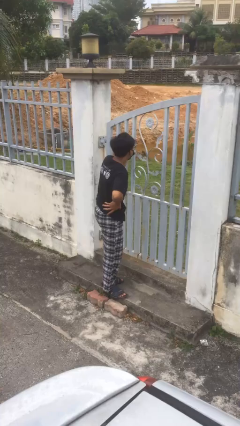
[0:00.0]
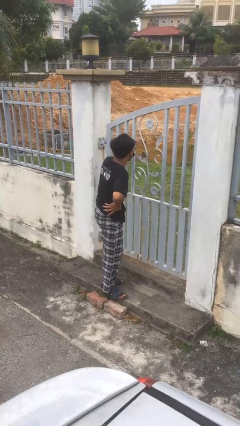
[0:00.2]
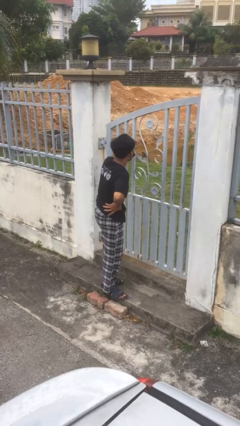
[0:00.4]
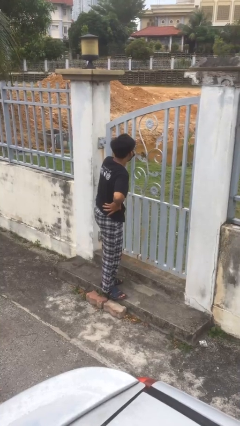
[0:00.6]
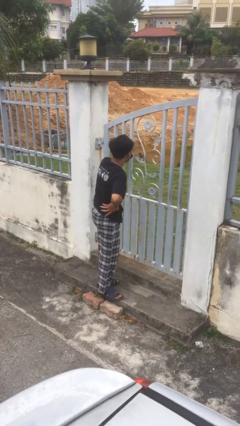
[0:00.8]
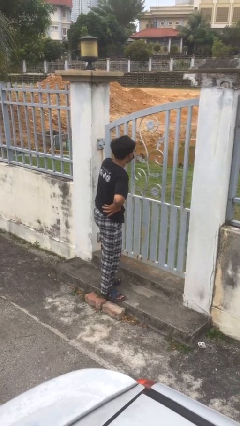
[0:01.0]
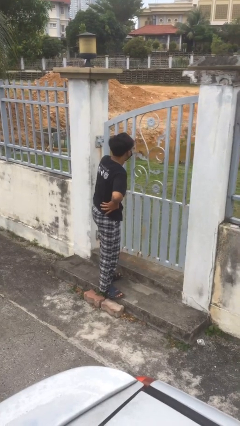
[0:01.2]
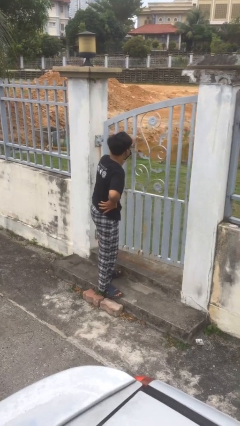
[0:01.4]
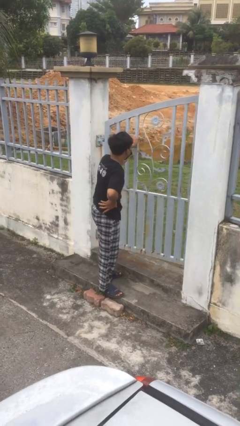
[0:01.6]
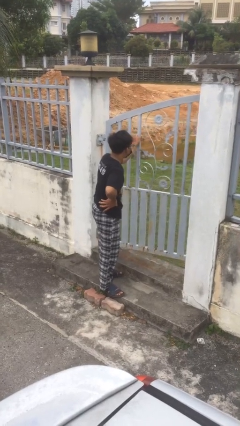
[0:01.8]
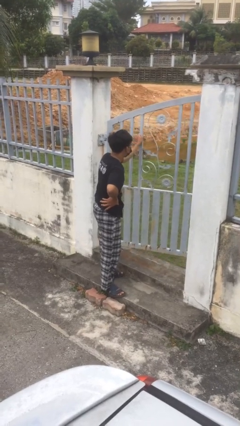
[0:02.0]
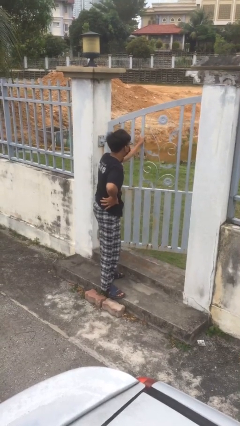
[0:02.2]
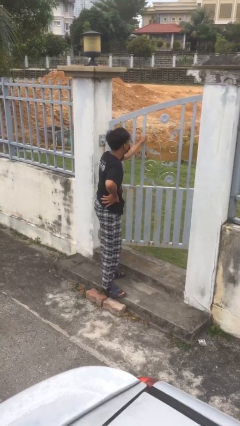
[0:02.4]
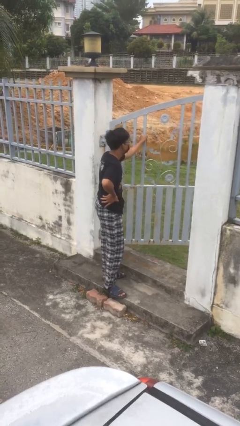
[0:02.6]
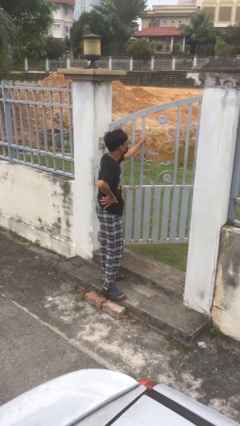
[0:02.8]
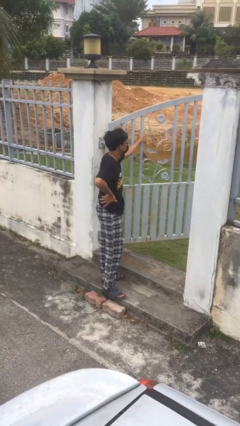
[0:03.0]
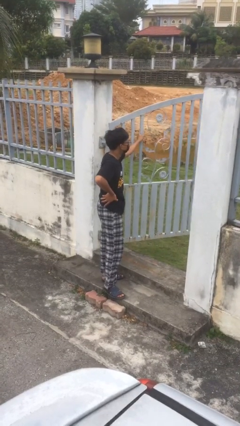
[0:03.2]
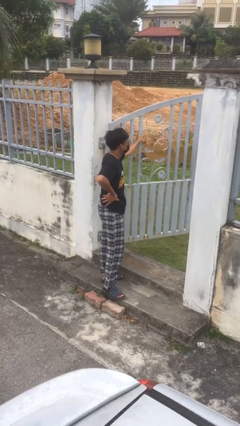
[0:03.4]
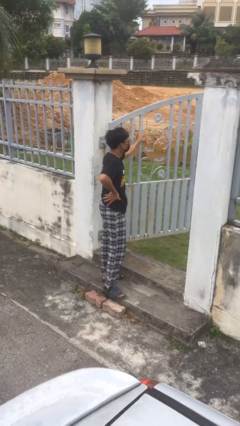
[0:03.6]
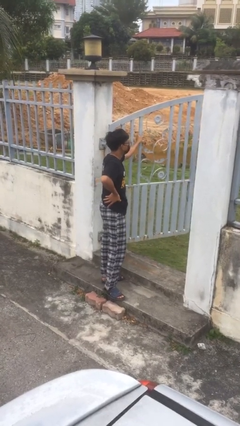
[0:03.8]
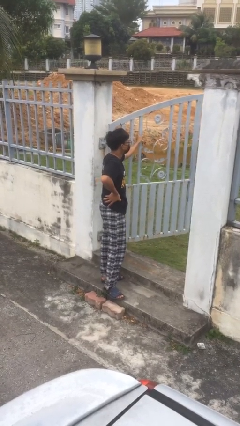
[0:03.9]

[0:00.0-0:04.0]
person opens facility door

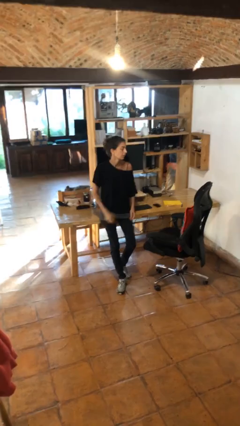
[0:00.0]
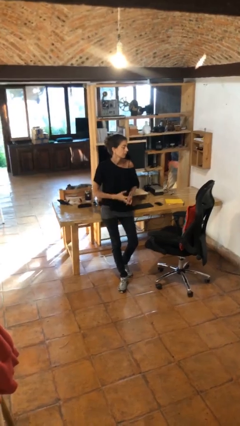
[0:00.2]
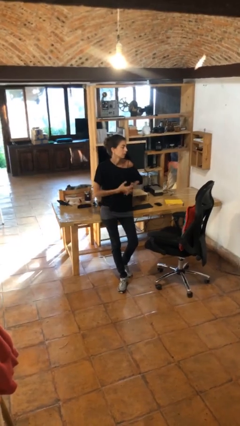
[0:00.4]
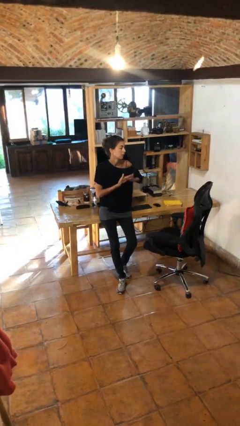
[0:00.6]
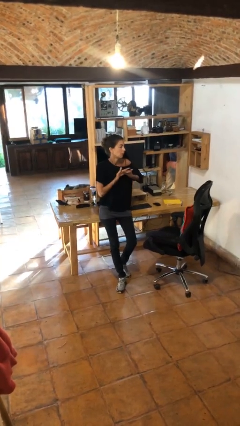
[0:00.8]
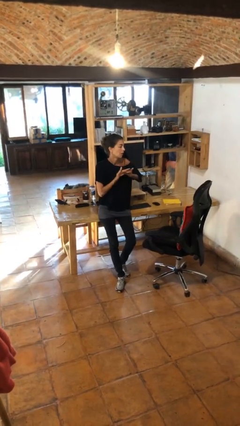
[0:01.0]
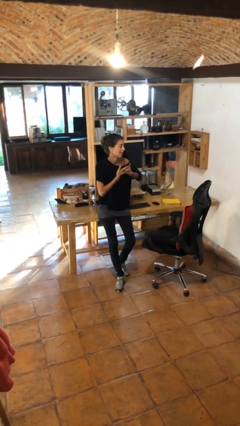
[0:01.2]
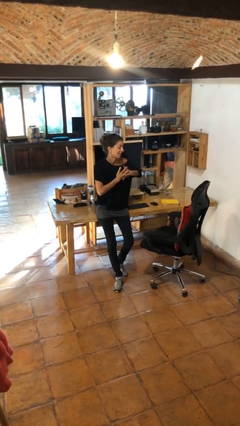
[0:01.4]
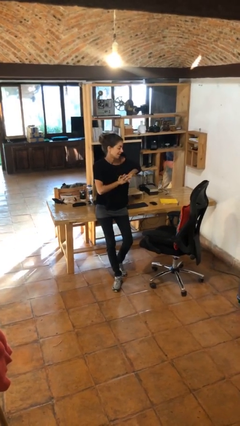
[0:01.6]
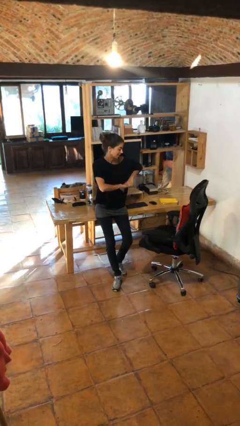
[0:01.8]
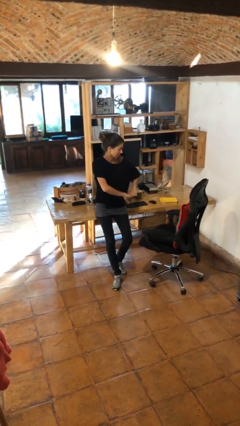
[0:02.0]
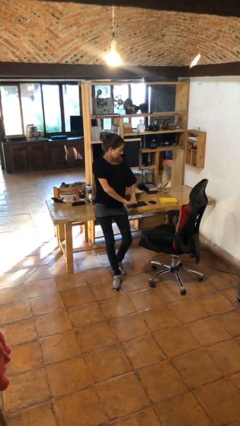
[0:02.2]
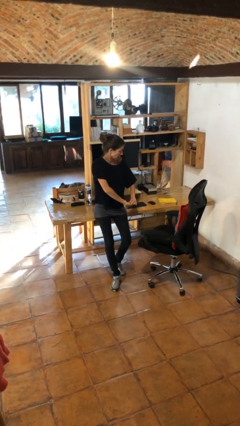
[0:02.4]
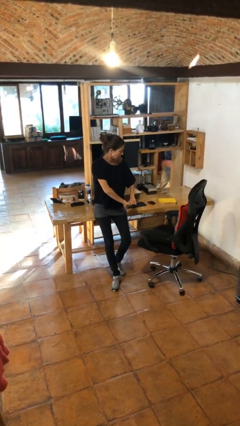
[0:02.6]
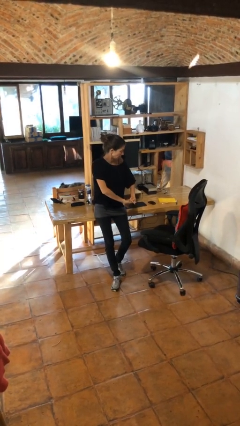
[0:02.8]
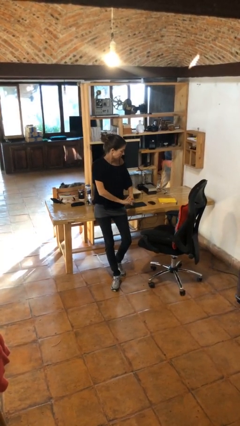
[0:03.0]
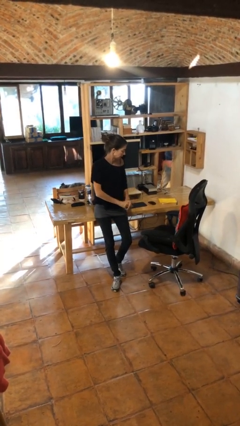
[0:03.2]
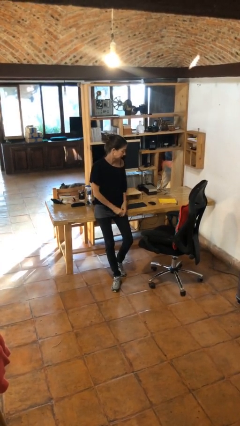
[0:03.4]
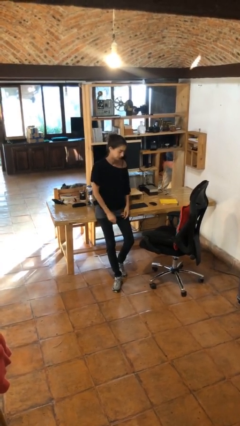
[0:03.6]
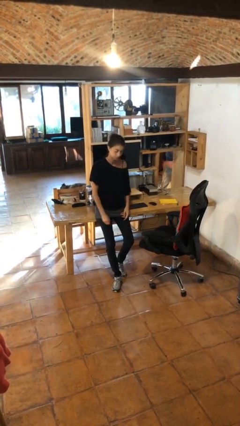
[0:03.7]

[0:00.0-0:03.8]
person cracks knuckles

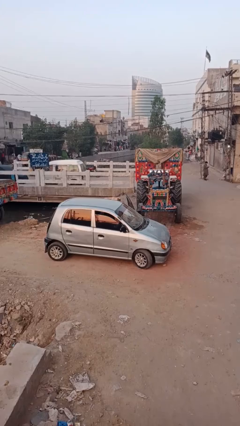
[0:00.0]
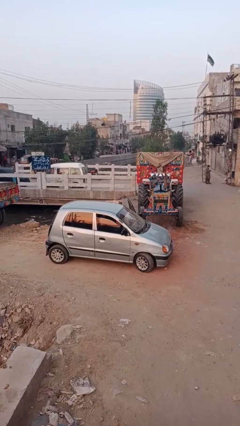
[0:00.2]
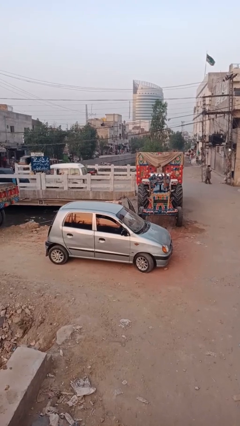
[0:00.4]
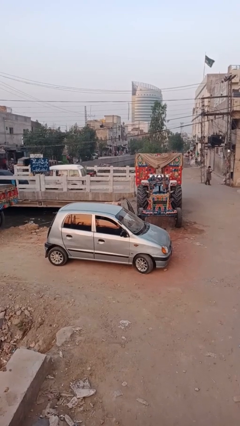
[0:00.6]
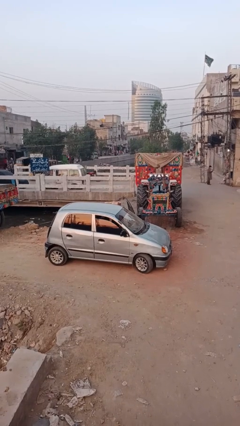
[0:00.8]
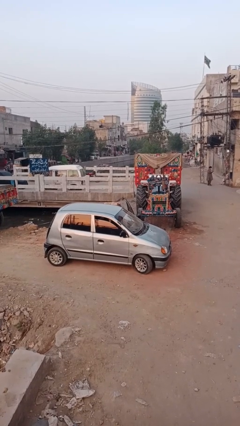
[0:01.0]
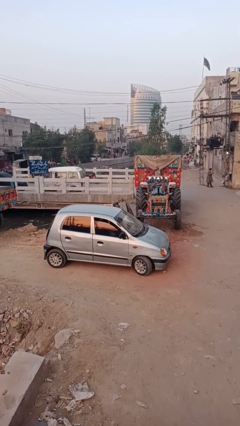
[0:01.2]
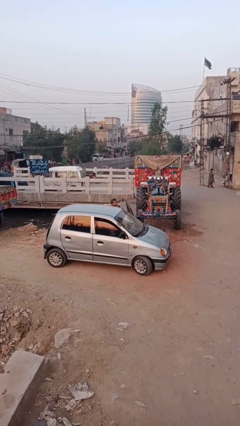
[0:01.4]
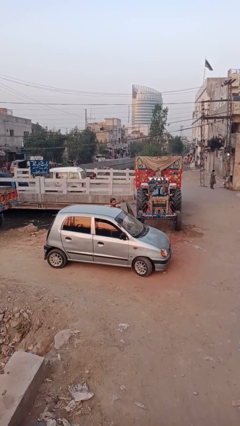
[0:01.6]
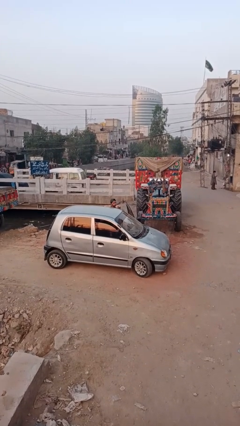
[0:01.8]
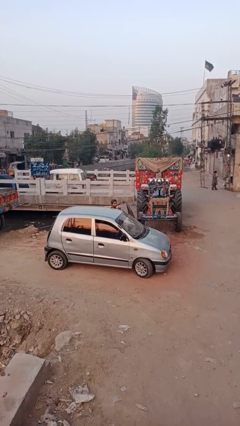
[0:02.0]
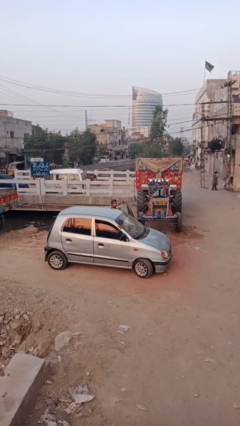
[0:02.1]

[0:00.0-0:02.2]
person exits car

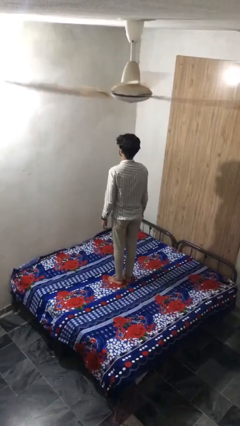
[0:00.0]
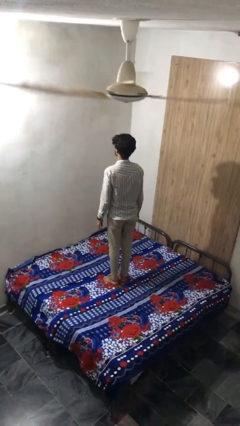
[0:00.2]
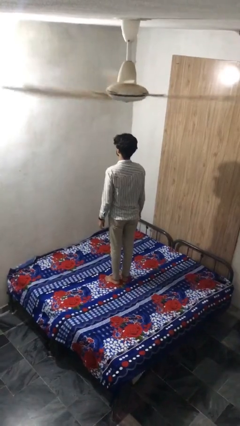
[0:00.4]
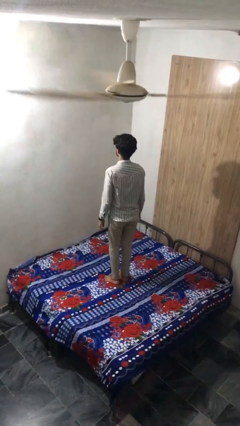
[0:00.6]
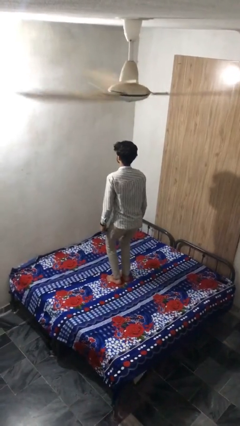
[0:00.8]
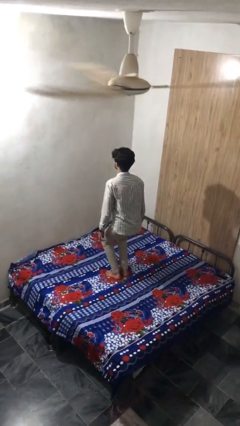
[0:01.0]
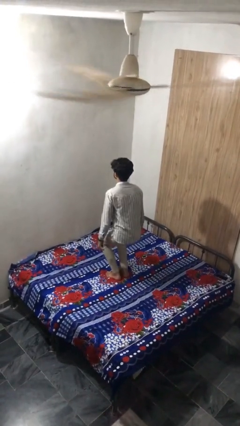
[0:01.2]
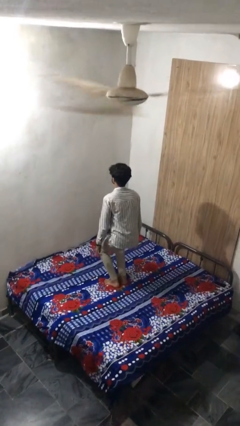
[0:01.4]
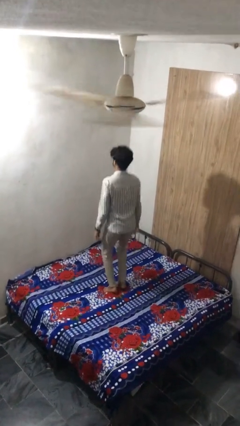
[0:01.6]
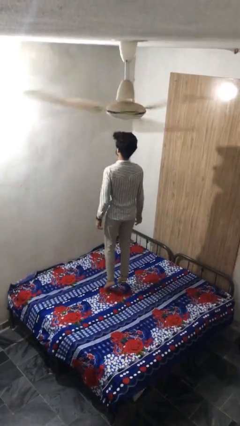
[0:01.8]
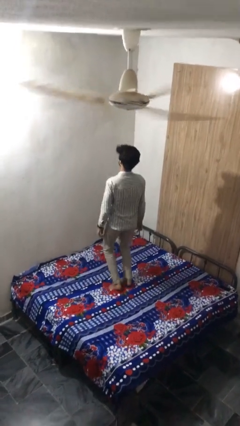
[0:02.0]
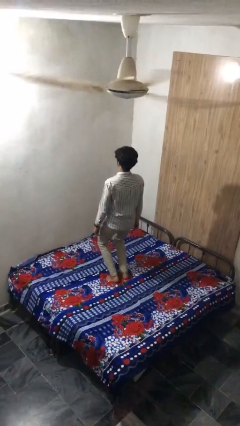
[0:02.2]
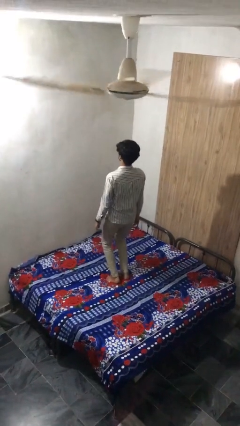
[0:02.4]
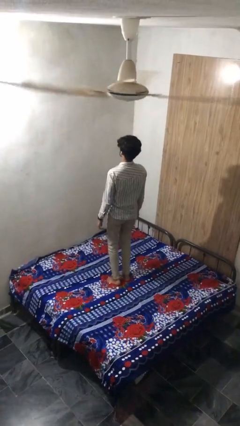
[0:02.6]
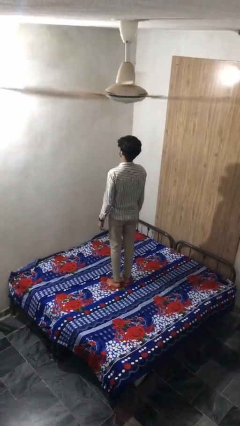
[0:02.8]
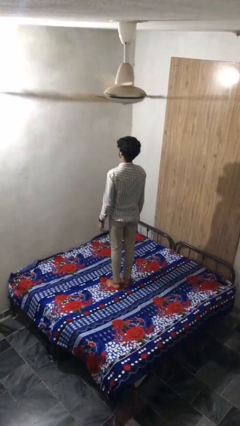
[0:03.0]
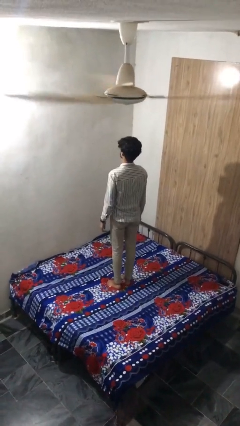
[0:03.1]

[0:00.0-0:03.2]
person jumps on bed

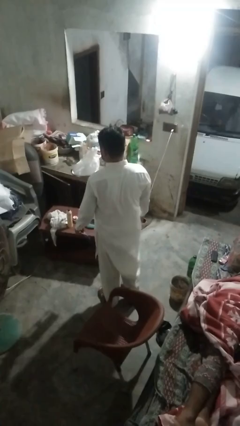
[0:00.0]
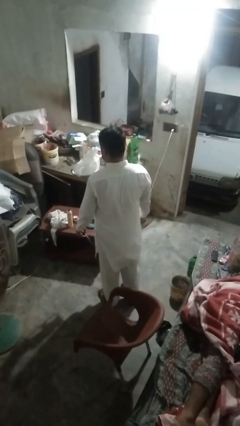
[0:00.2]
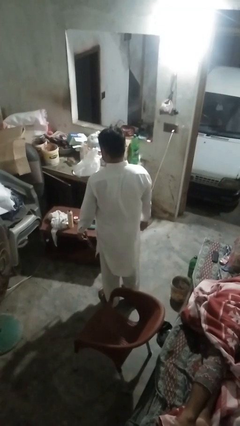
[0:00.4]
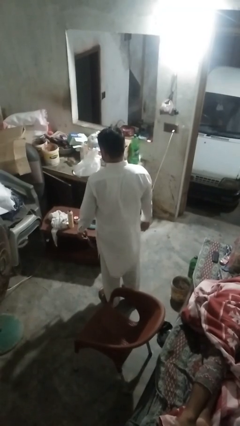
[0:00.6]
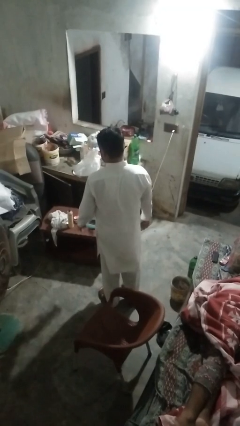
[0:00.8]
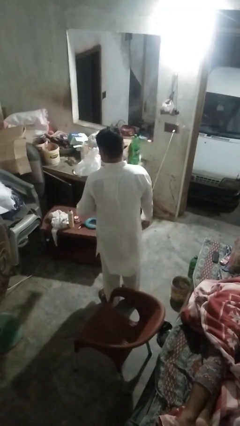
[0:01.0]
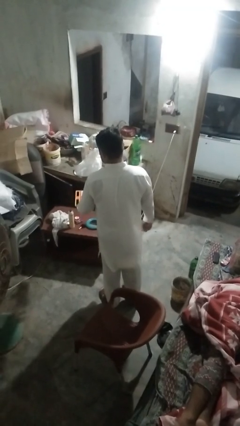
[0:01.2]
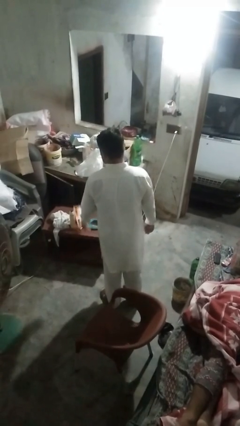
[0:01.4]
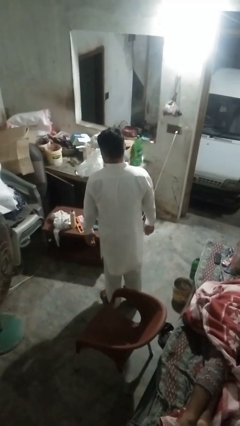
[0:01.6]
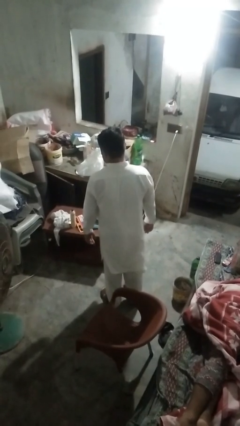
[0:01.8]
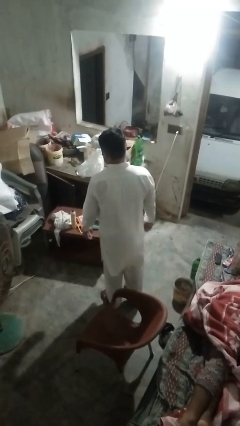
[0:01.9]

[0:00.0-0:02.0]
person throws object on table

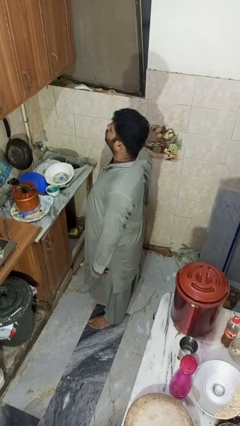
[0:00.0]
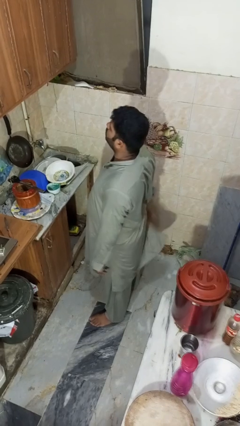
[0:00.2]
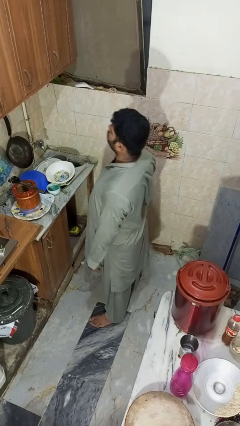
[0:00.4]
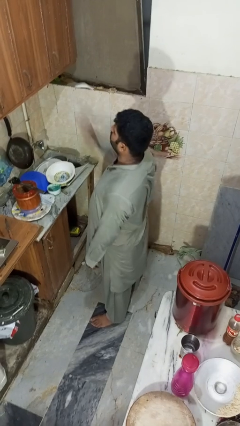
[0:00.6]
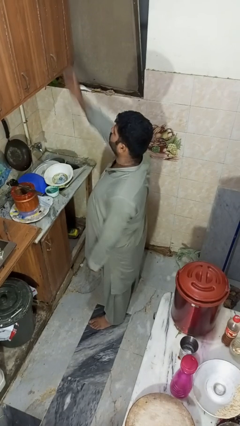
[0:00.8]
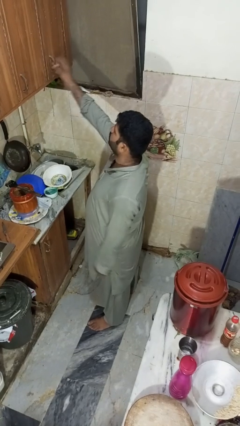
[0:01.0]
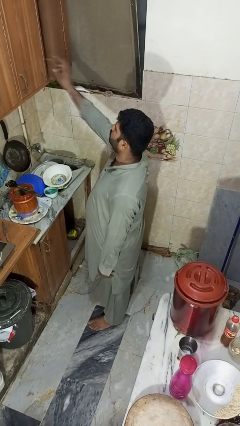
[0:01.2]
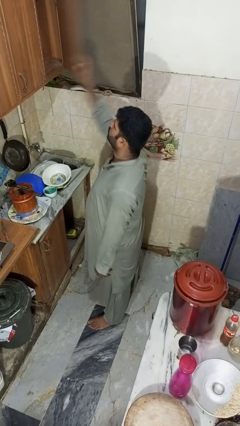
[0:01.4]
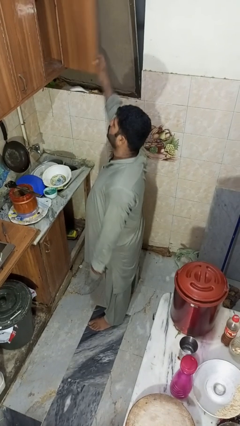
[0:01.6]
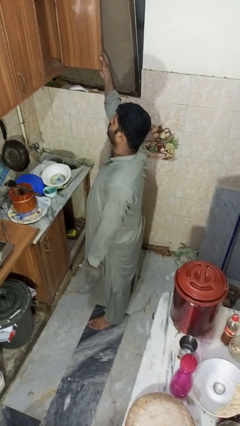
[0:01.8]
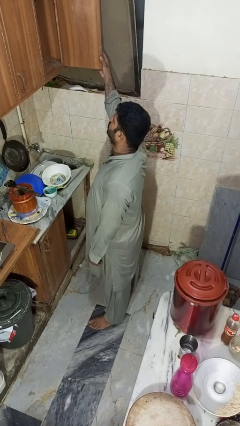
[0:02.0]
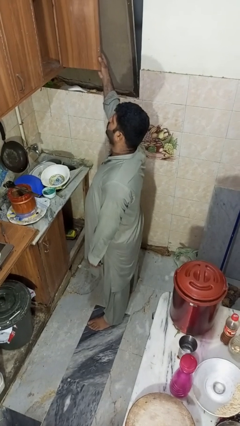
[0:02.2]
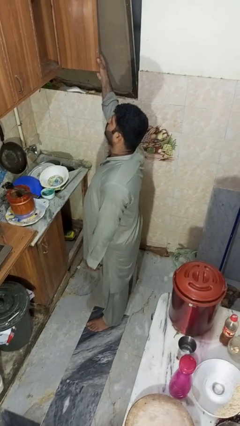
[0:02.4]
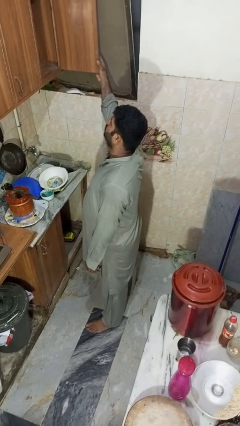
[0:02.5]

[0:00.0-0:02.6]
person opens cabinet
